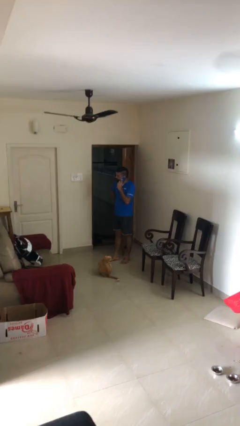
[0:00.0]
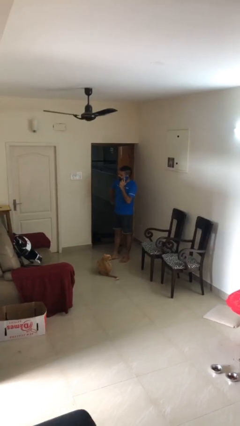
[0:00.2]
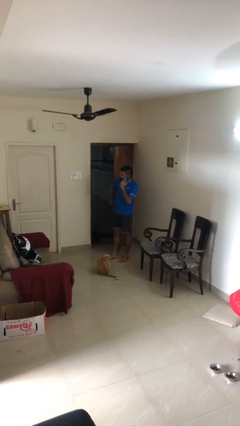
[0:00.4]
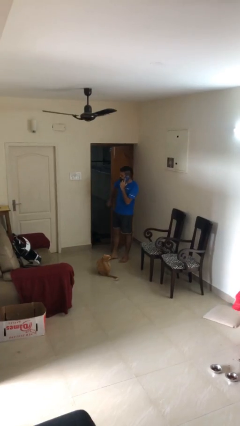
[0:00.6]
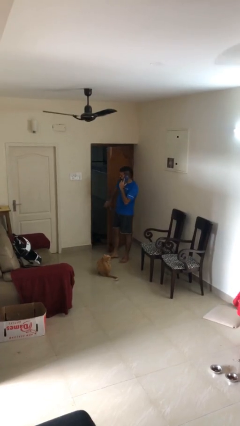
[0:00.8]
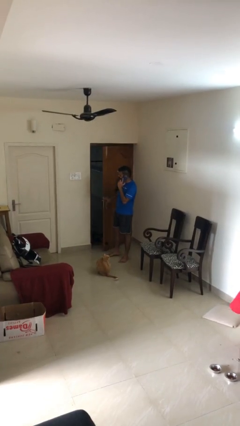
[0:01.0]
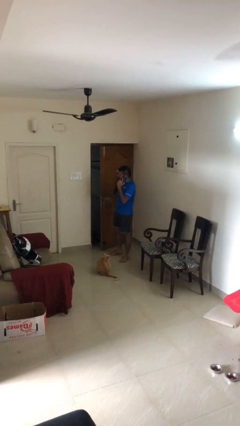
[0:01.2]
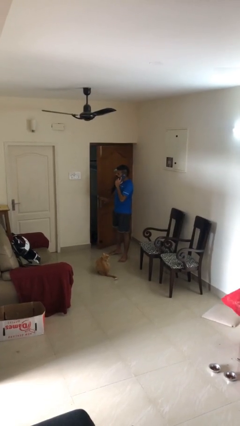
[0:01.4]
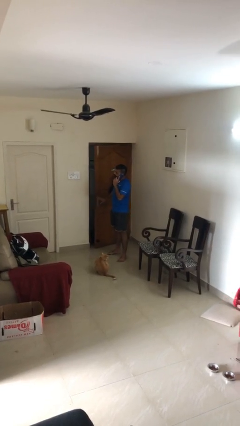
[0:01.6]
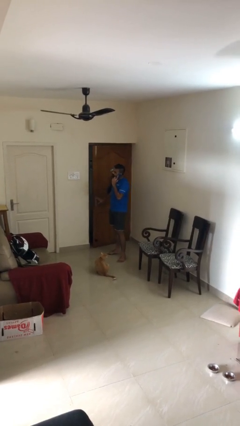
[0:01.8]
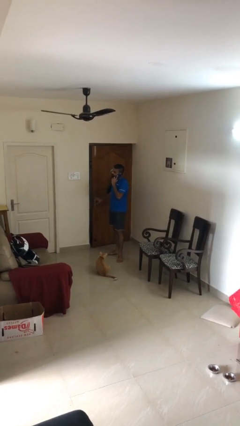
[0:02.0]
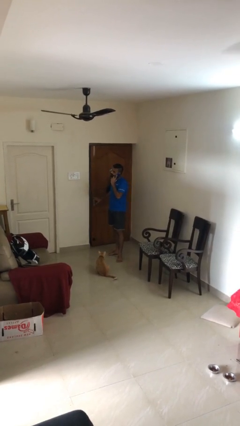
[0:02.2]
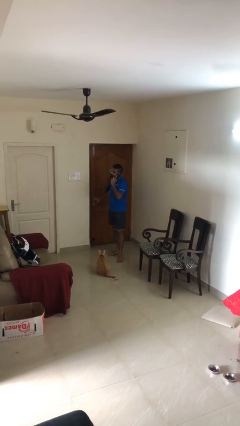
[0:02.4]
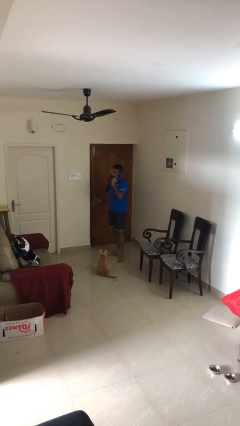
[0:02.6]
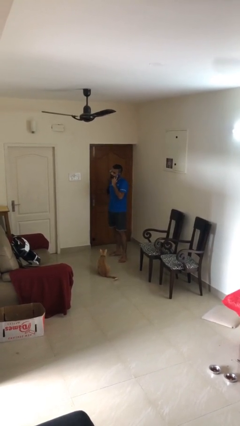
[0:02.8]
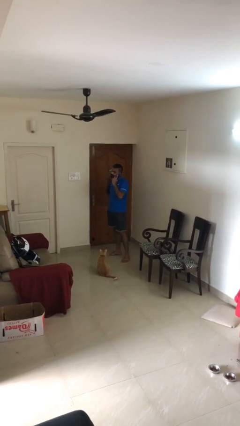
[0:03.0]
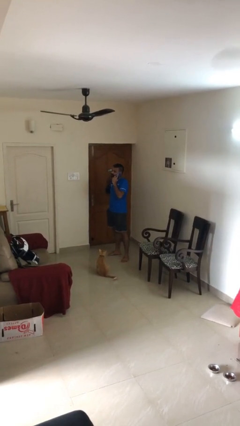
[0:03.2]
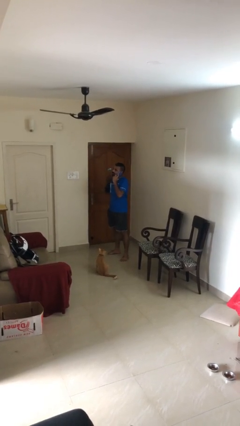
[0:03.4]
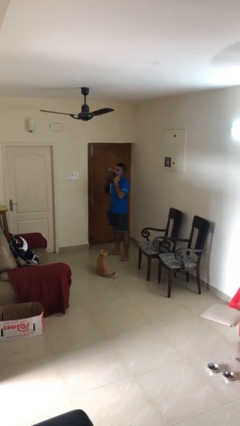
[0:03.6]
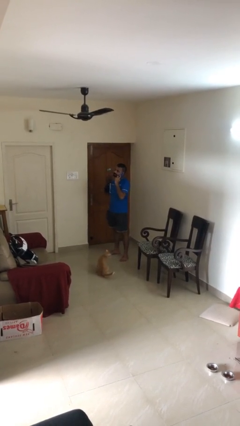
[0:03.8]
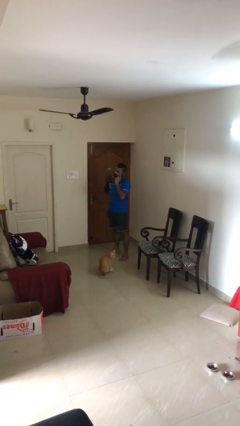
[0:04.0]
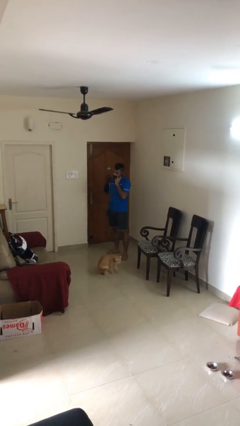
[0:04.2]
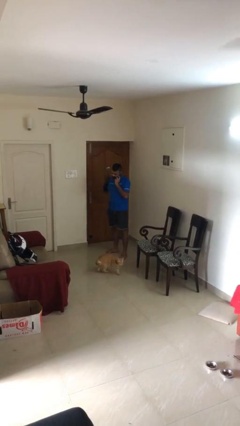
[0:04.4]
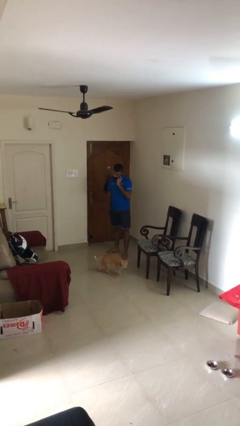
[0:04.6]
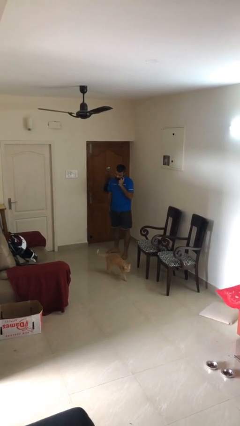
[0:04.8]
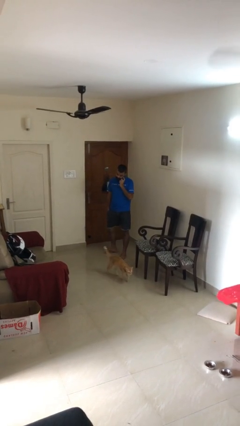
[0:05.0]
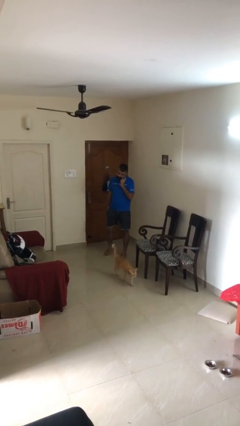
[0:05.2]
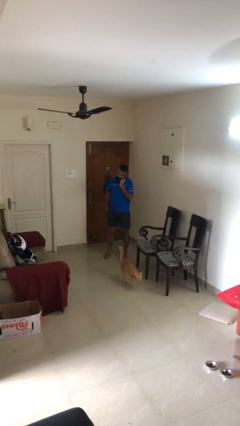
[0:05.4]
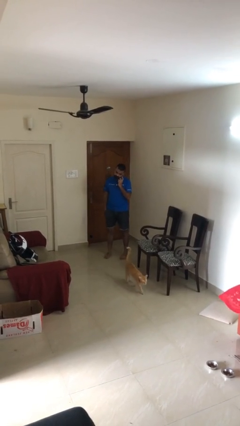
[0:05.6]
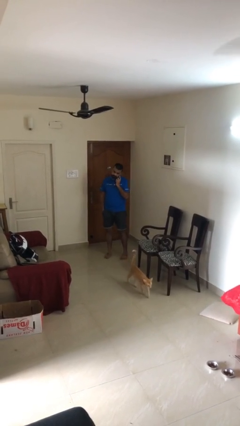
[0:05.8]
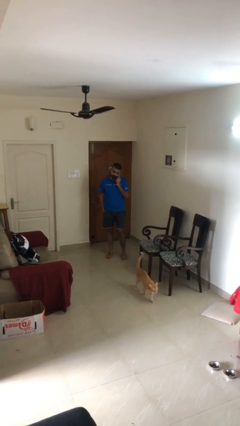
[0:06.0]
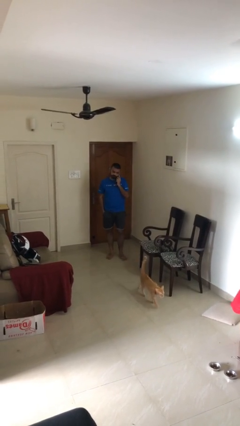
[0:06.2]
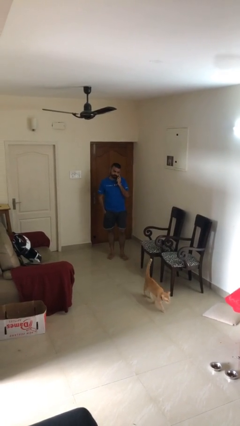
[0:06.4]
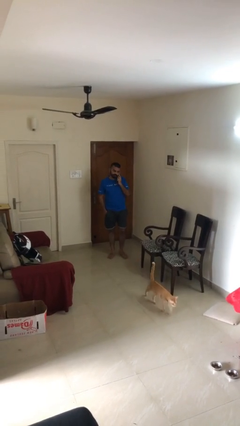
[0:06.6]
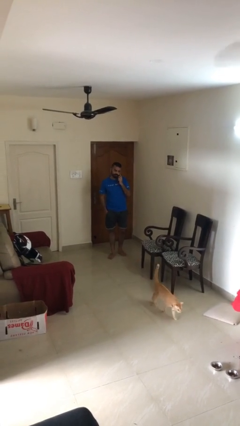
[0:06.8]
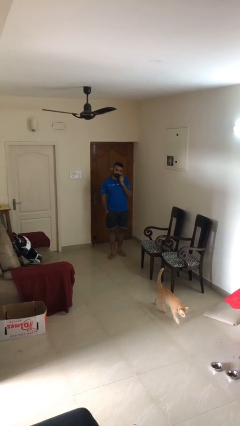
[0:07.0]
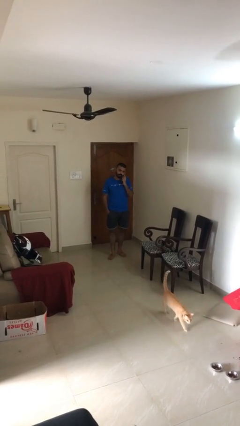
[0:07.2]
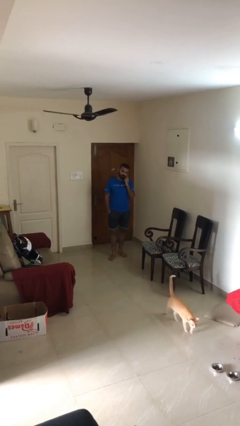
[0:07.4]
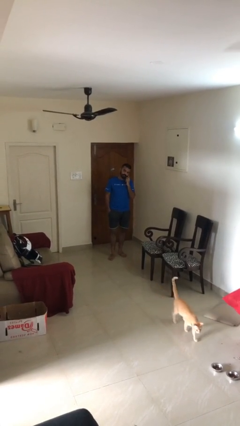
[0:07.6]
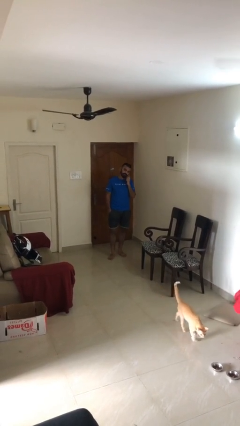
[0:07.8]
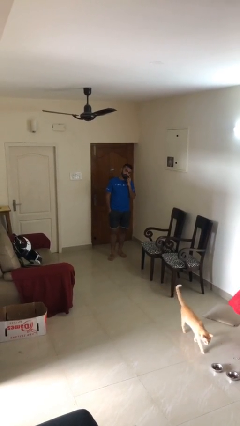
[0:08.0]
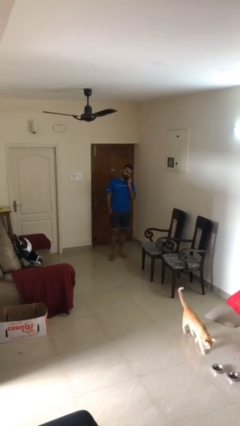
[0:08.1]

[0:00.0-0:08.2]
person closes facility door

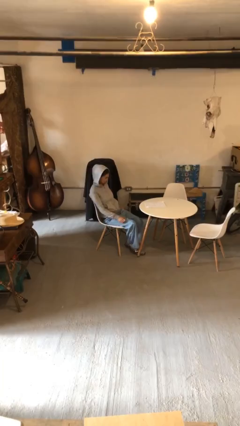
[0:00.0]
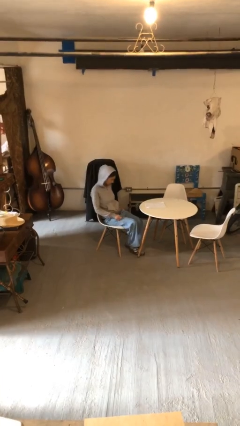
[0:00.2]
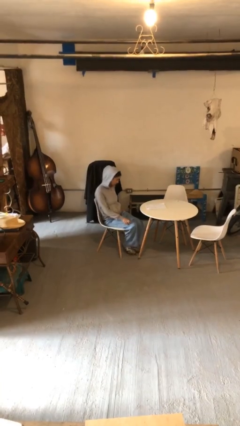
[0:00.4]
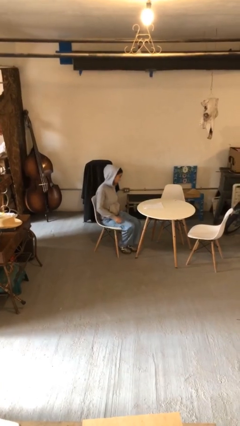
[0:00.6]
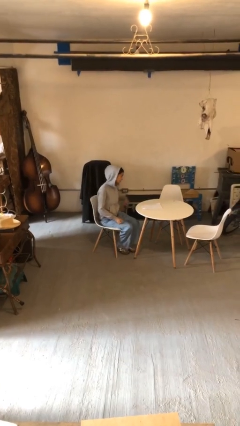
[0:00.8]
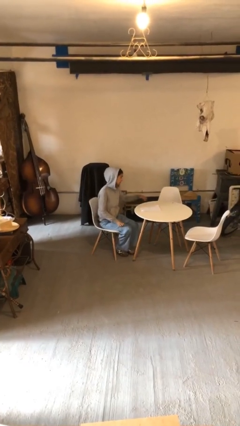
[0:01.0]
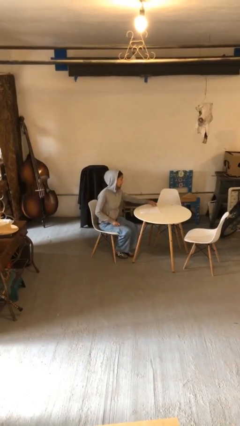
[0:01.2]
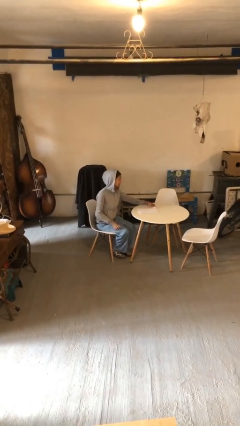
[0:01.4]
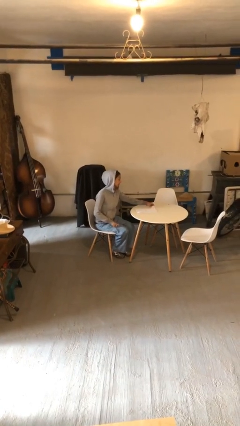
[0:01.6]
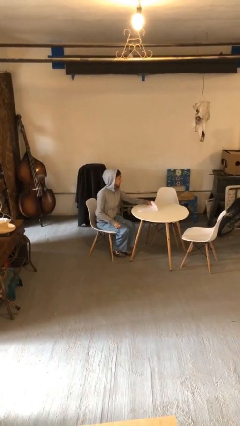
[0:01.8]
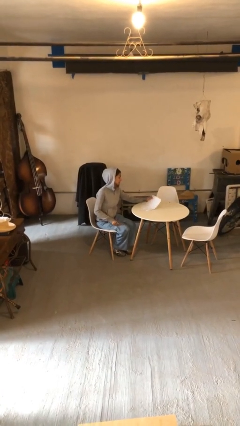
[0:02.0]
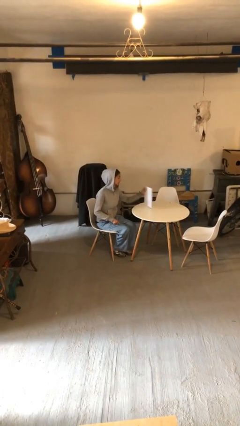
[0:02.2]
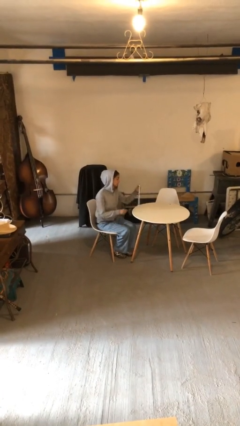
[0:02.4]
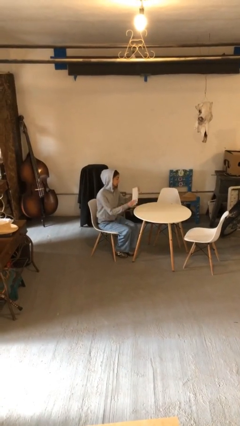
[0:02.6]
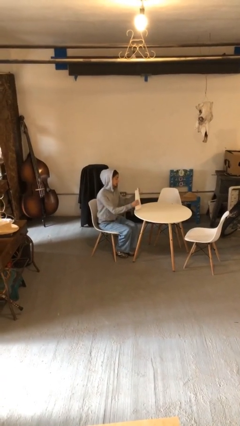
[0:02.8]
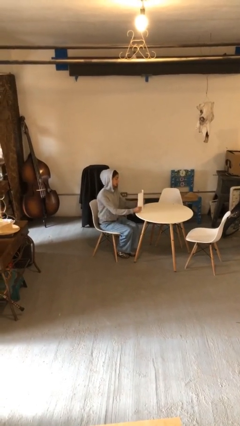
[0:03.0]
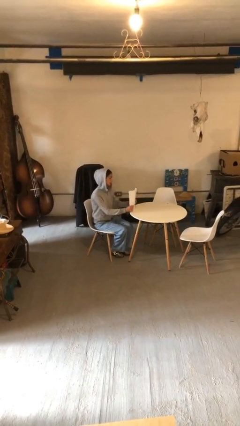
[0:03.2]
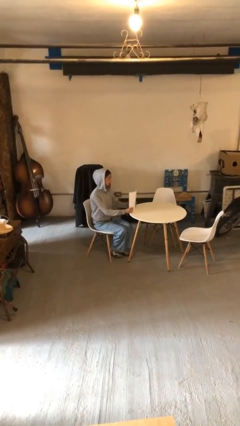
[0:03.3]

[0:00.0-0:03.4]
person picks up object from table

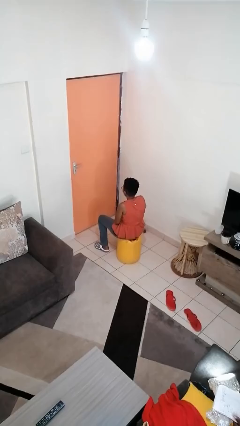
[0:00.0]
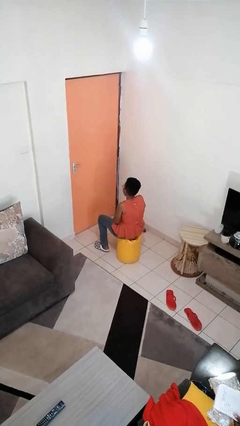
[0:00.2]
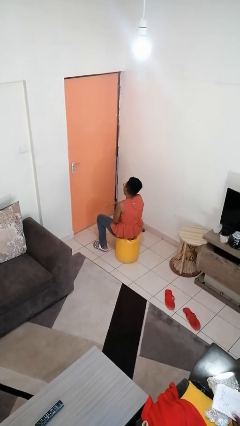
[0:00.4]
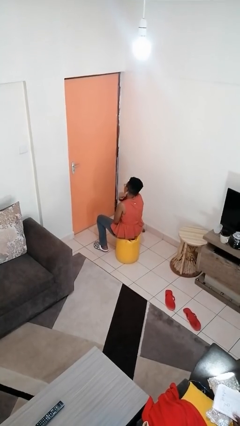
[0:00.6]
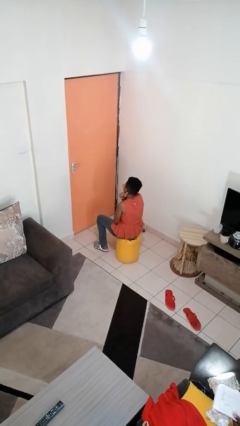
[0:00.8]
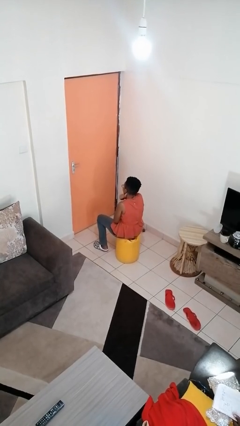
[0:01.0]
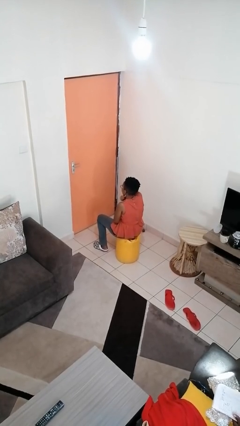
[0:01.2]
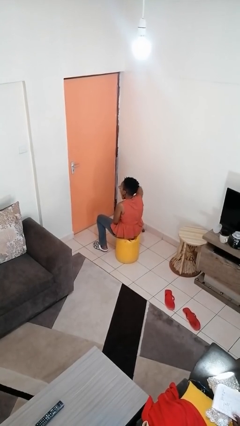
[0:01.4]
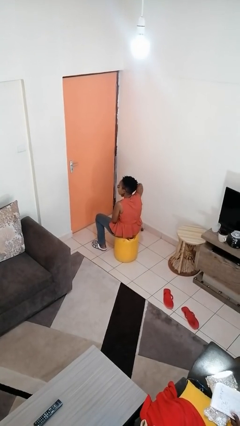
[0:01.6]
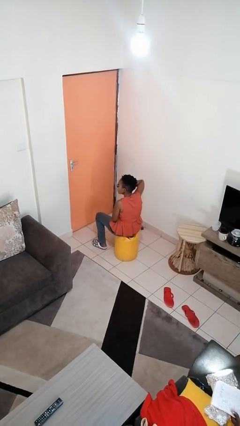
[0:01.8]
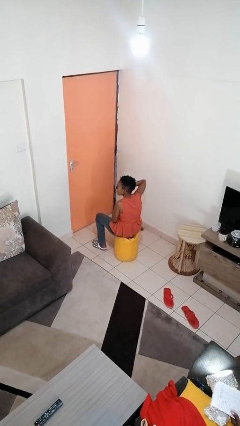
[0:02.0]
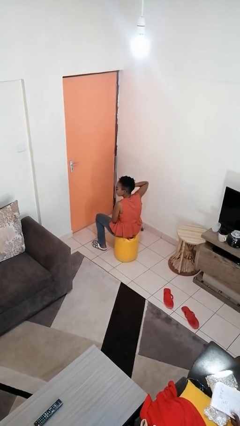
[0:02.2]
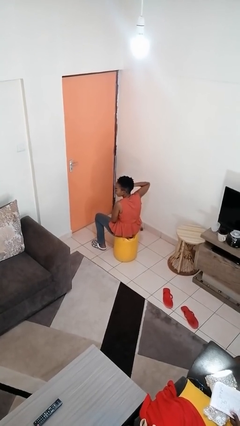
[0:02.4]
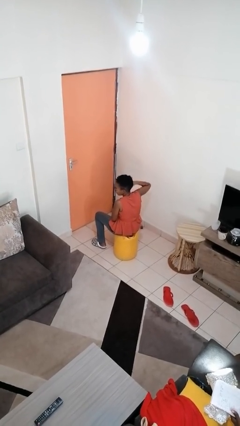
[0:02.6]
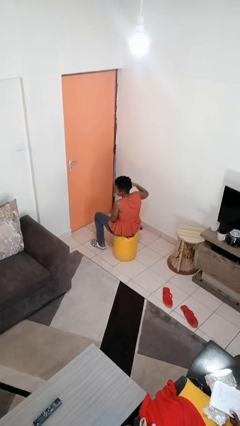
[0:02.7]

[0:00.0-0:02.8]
person gestures cut

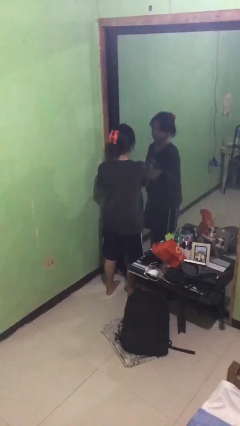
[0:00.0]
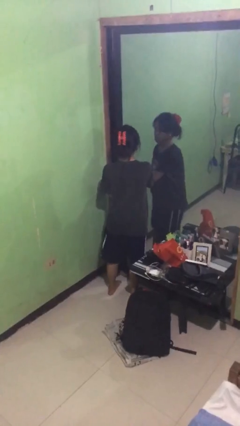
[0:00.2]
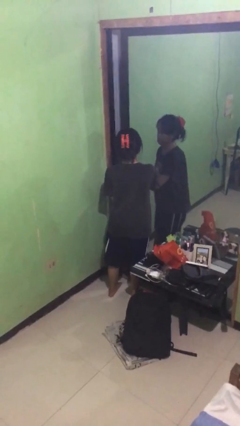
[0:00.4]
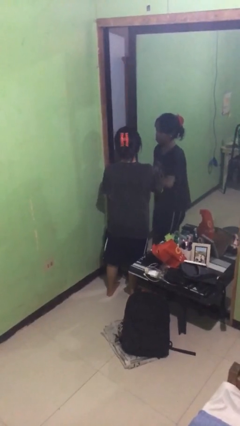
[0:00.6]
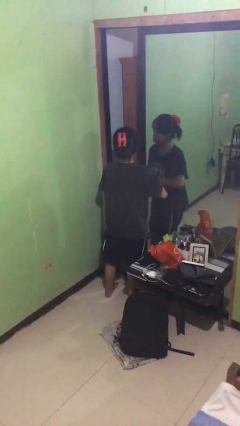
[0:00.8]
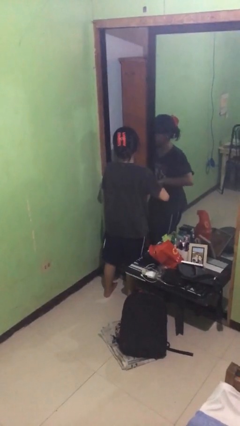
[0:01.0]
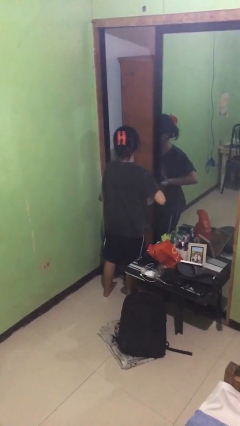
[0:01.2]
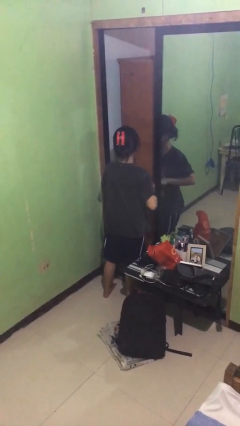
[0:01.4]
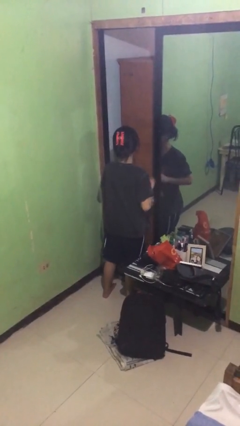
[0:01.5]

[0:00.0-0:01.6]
person opens sliding door

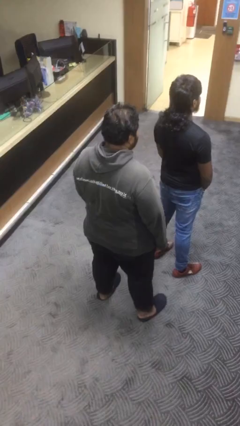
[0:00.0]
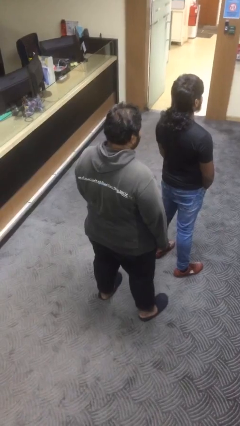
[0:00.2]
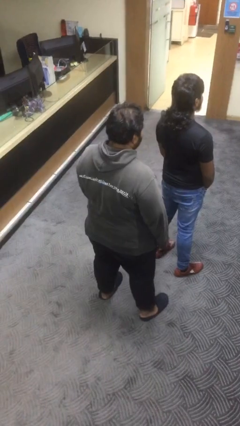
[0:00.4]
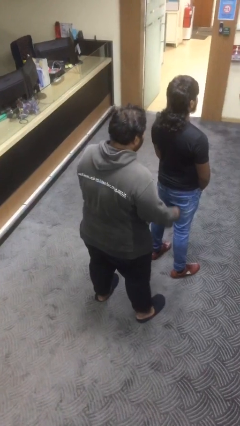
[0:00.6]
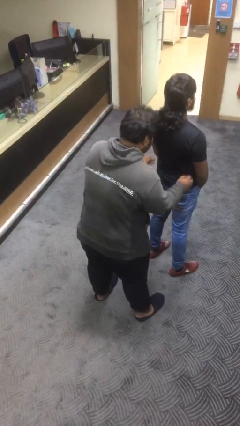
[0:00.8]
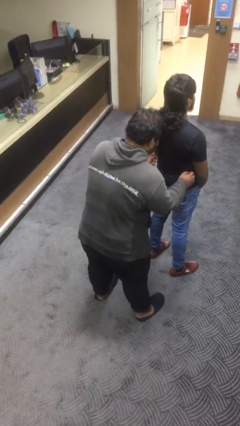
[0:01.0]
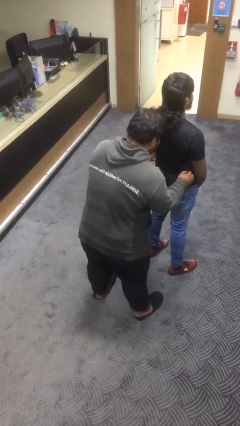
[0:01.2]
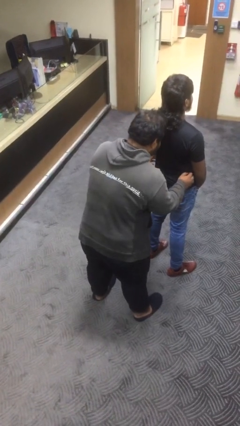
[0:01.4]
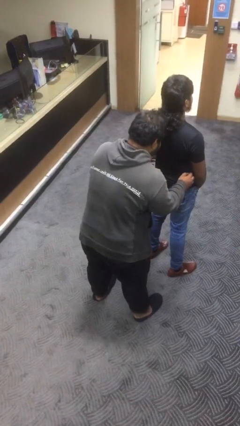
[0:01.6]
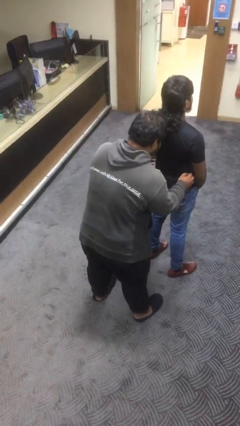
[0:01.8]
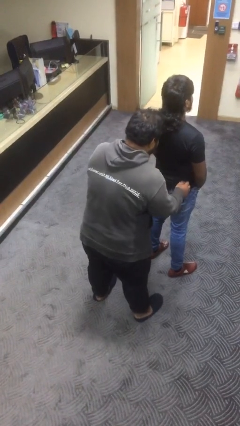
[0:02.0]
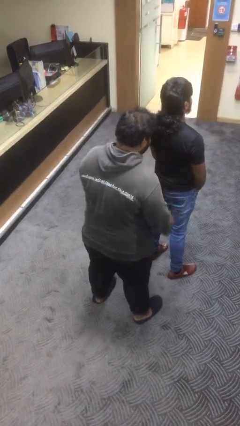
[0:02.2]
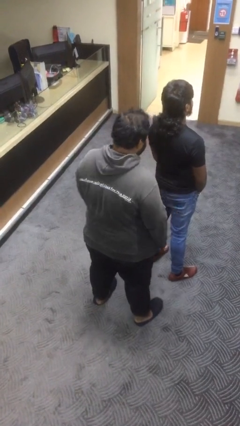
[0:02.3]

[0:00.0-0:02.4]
person tickles person
